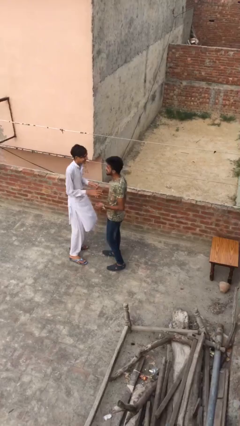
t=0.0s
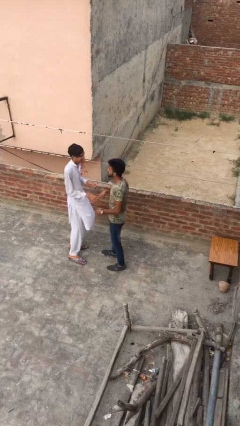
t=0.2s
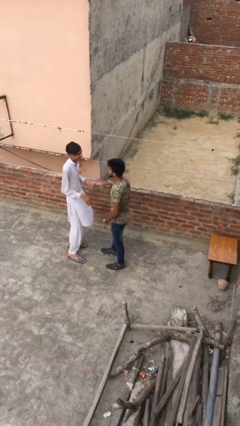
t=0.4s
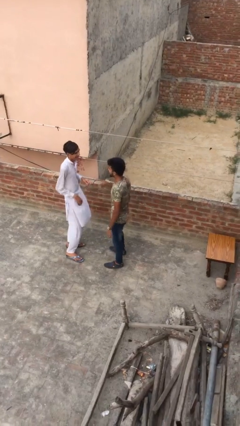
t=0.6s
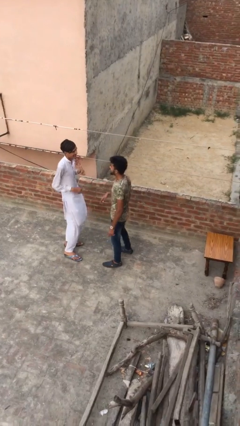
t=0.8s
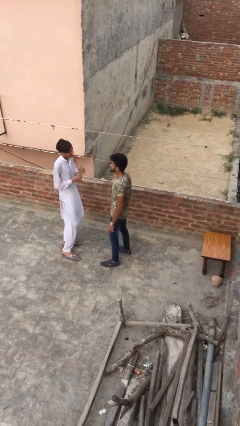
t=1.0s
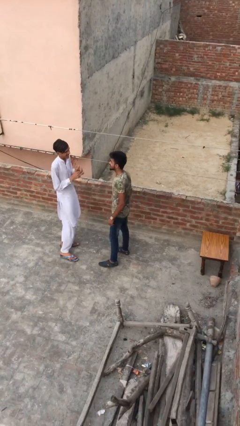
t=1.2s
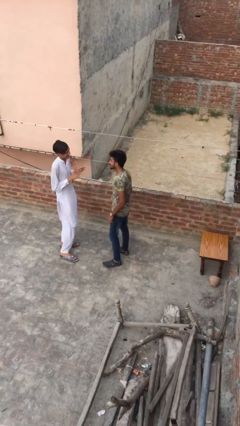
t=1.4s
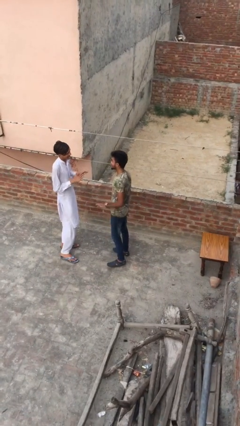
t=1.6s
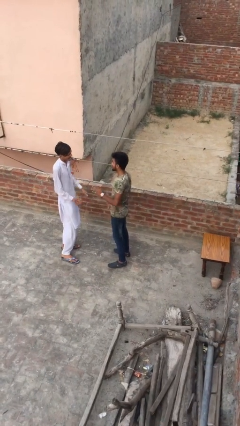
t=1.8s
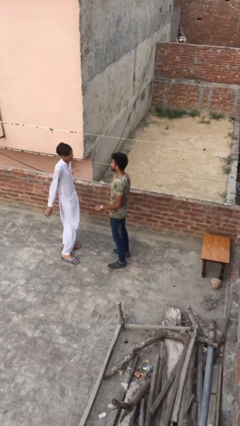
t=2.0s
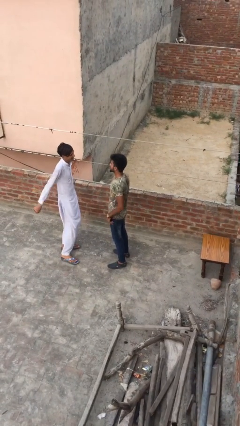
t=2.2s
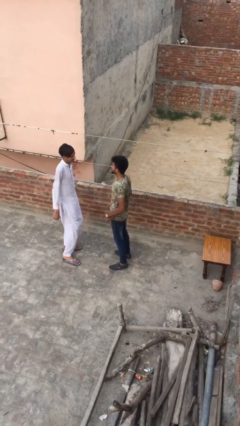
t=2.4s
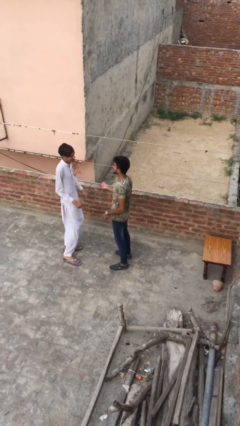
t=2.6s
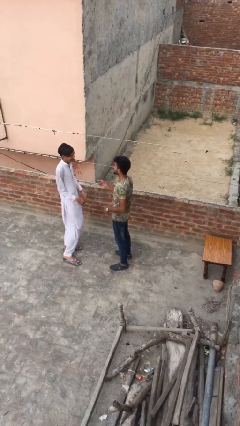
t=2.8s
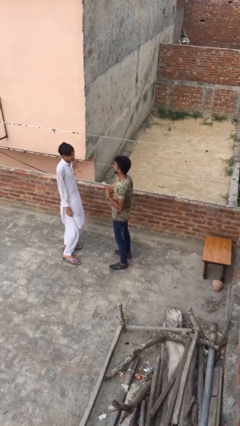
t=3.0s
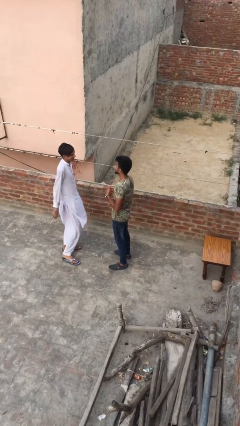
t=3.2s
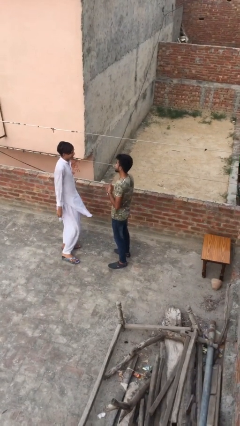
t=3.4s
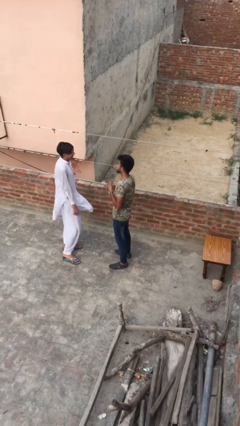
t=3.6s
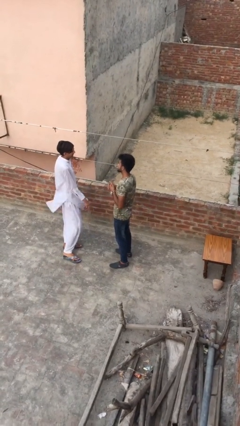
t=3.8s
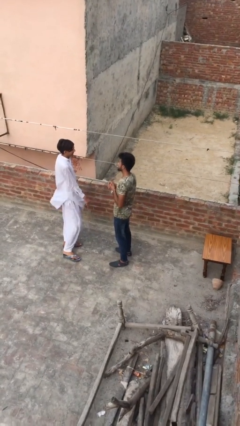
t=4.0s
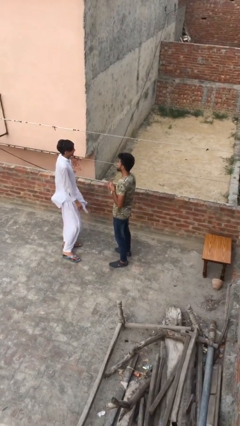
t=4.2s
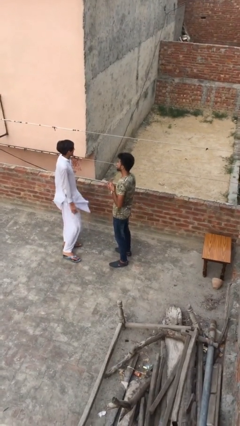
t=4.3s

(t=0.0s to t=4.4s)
person talks to person

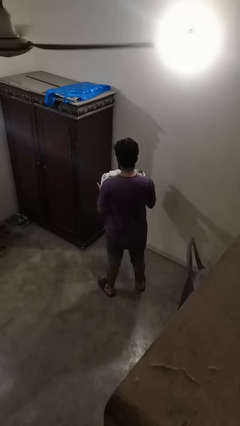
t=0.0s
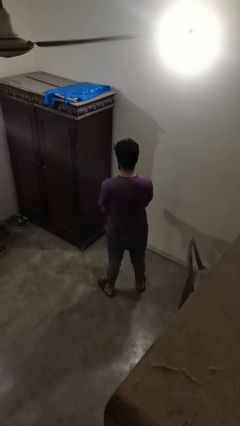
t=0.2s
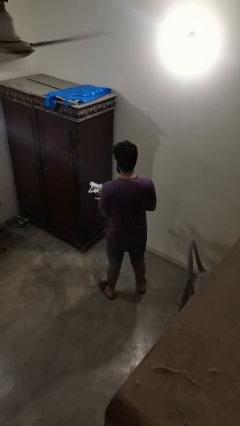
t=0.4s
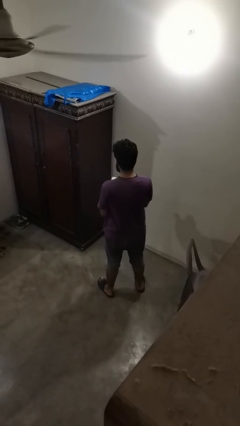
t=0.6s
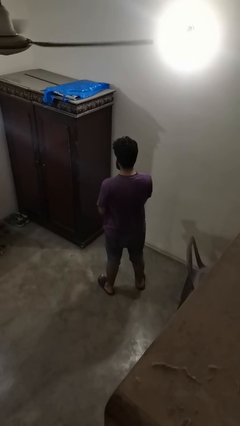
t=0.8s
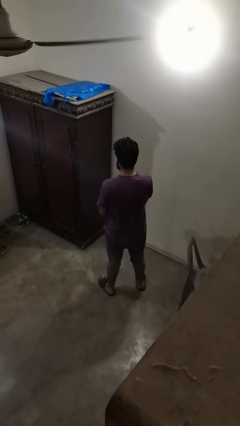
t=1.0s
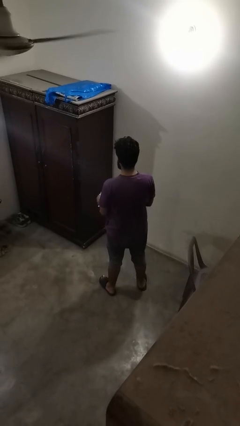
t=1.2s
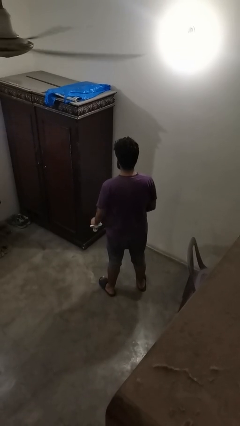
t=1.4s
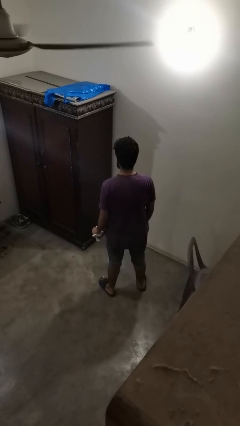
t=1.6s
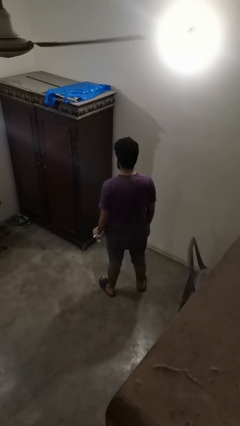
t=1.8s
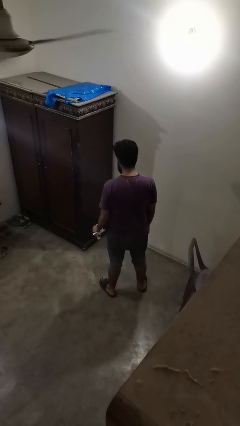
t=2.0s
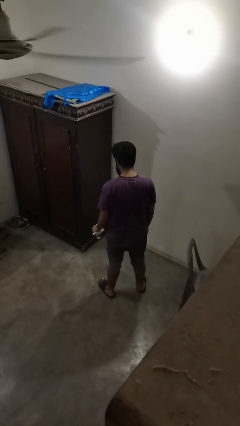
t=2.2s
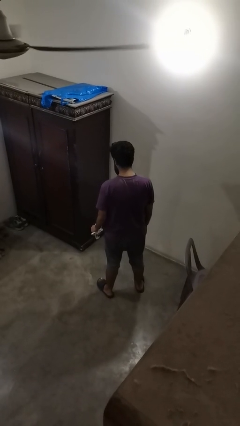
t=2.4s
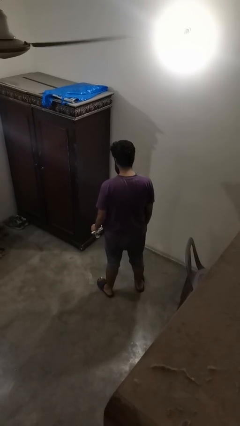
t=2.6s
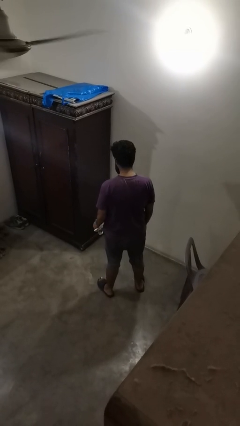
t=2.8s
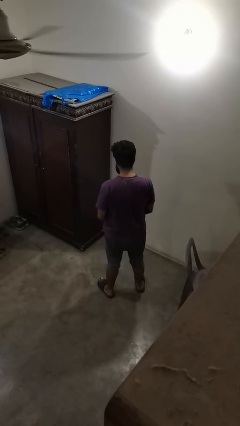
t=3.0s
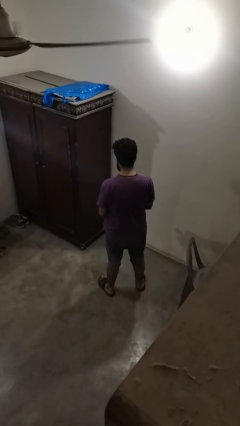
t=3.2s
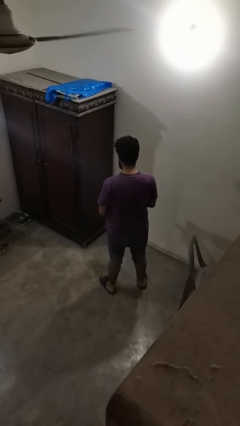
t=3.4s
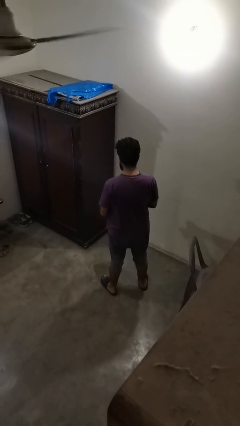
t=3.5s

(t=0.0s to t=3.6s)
person crumples paper

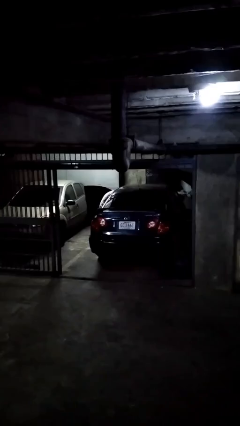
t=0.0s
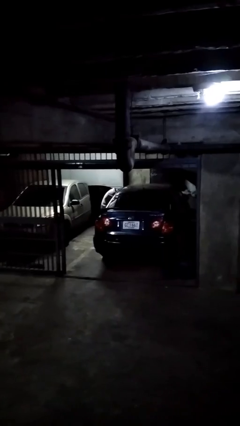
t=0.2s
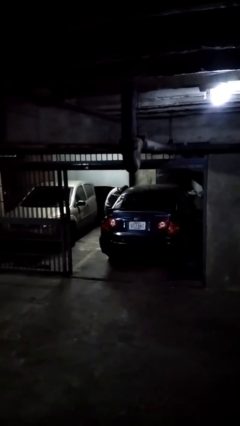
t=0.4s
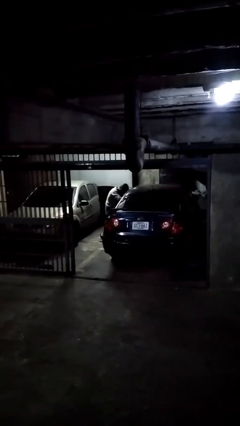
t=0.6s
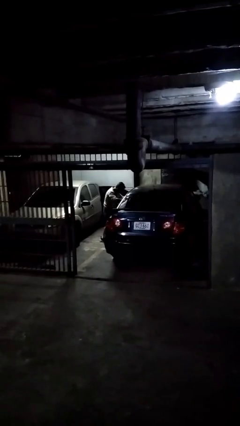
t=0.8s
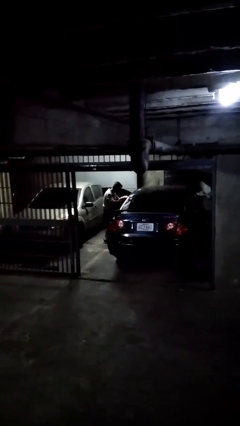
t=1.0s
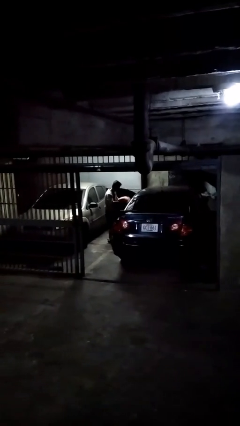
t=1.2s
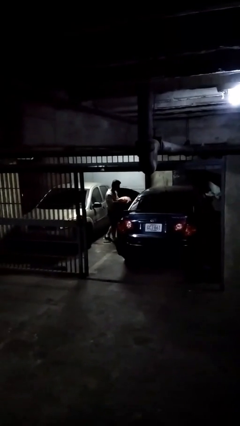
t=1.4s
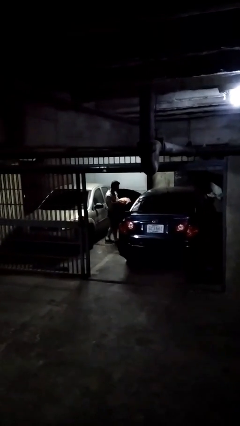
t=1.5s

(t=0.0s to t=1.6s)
person unloads car

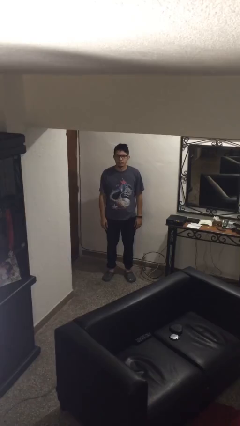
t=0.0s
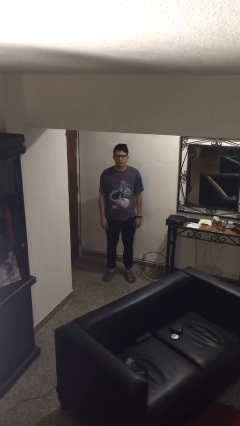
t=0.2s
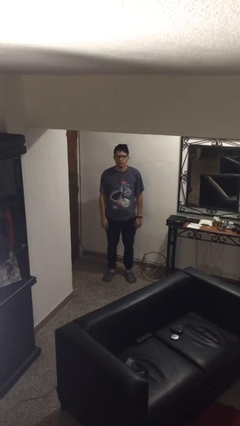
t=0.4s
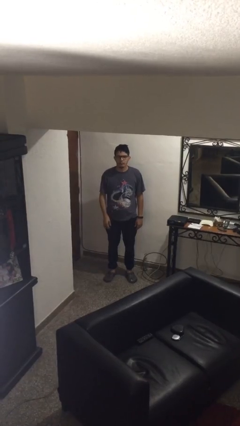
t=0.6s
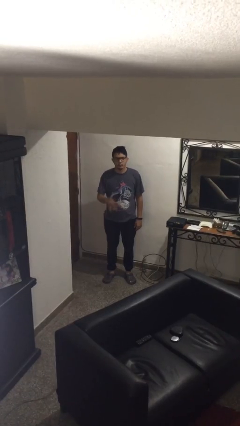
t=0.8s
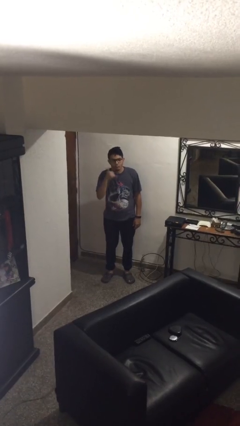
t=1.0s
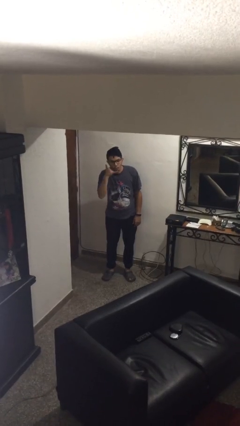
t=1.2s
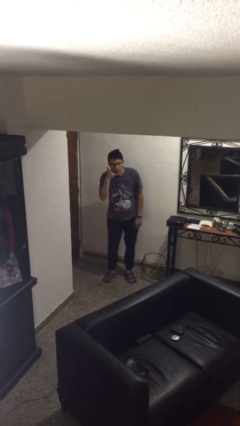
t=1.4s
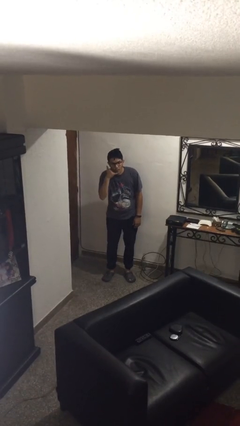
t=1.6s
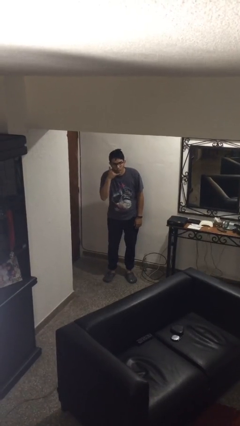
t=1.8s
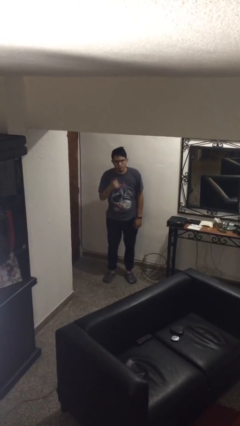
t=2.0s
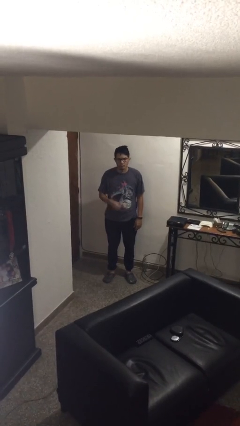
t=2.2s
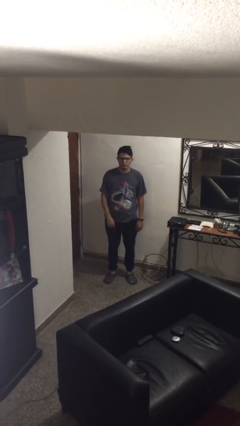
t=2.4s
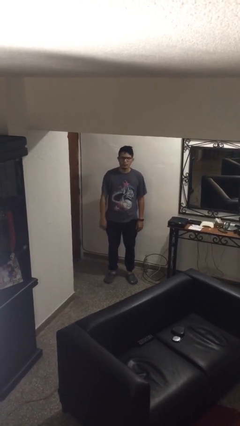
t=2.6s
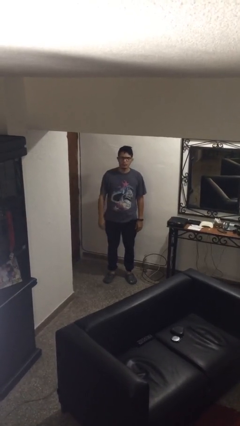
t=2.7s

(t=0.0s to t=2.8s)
person gestures call me

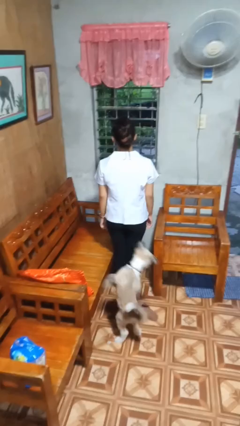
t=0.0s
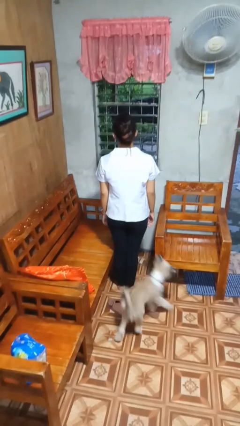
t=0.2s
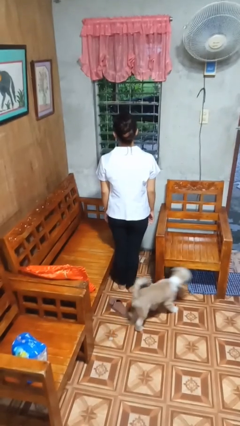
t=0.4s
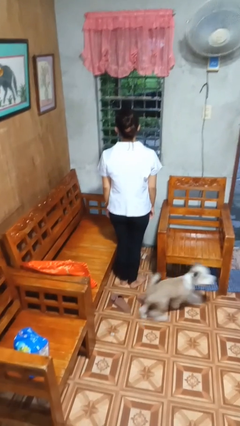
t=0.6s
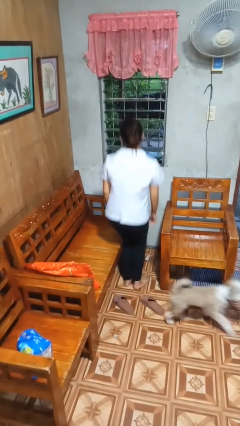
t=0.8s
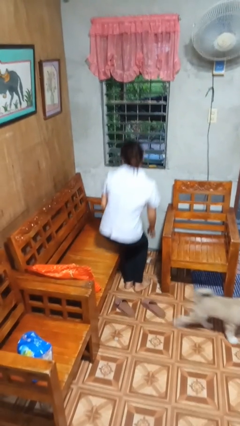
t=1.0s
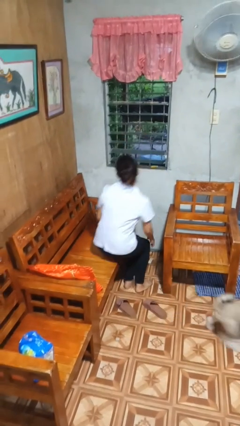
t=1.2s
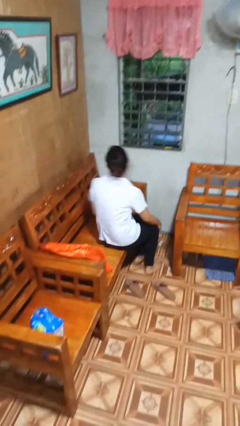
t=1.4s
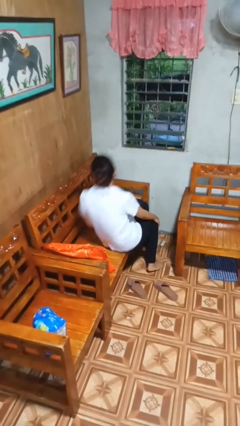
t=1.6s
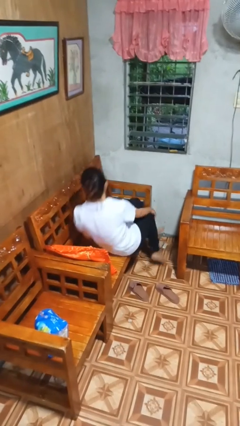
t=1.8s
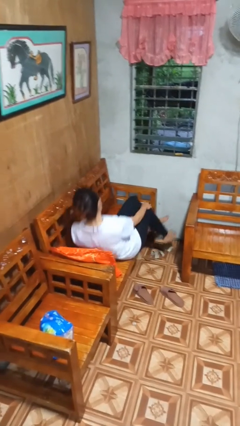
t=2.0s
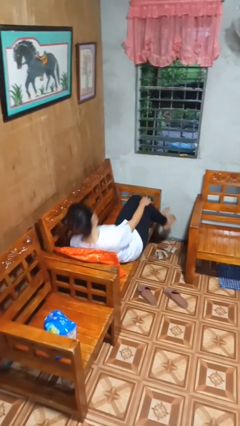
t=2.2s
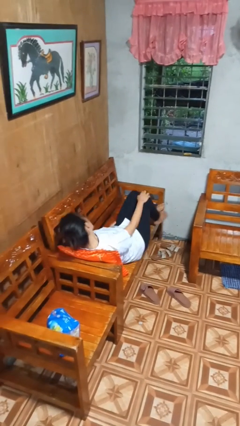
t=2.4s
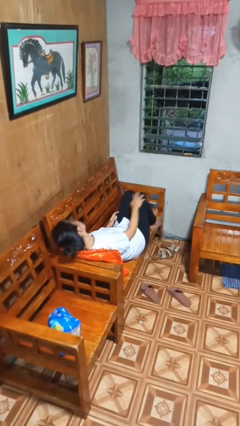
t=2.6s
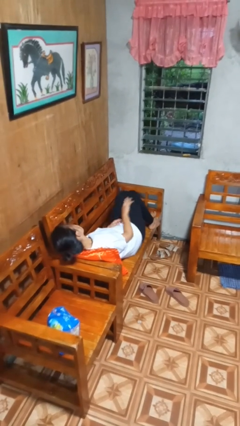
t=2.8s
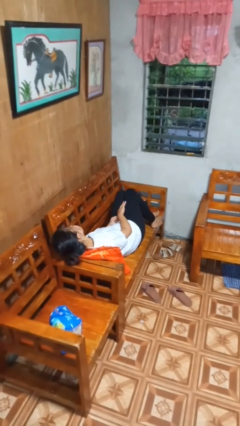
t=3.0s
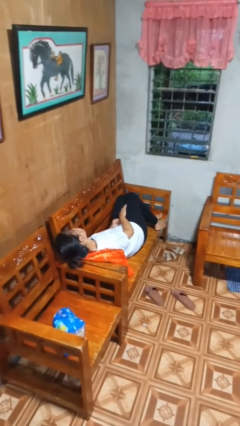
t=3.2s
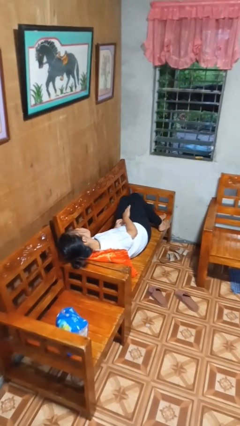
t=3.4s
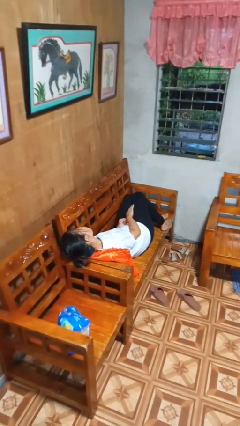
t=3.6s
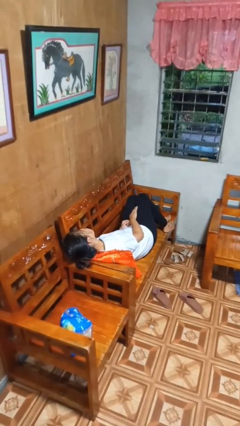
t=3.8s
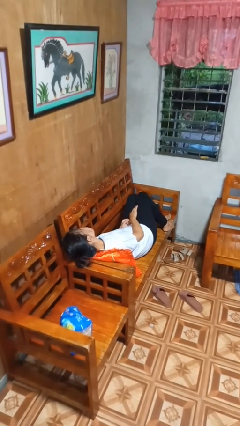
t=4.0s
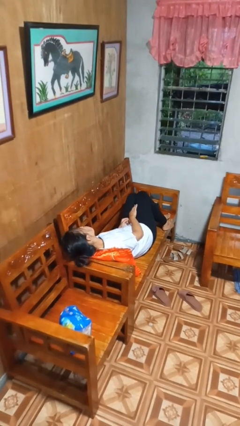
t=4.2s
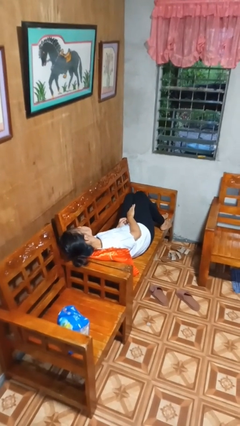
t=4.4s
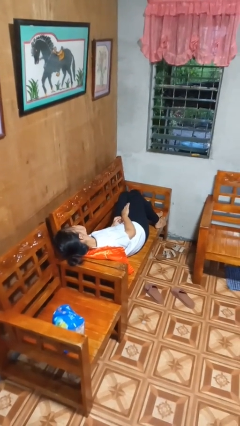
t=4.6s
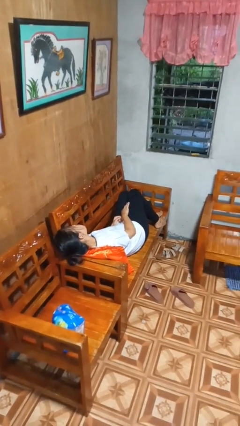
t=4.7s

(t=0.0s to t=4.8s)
person lies down on couch

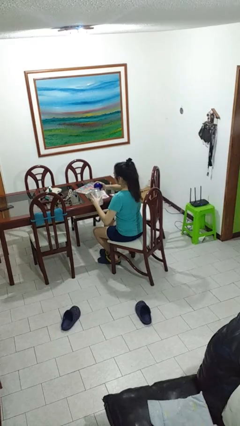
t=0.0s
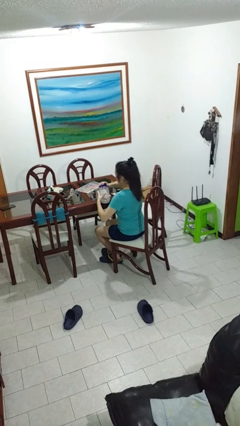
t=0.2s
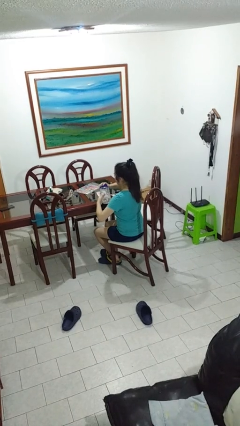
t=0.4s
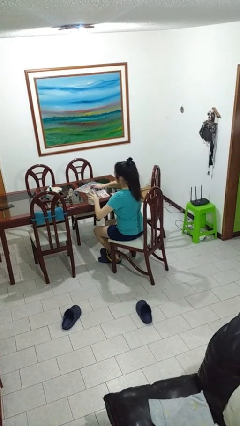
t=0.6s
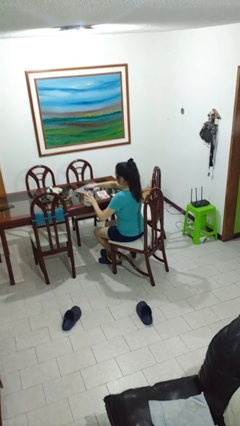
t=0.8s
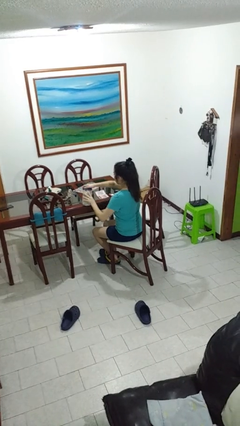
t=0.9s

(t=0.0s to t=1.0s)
person closes jar
